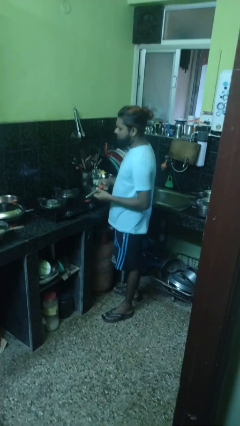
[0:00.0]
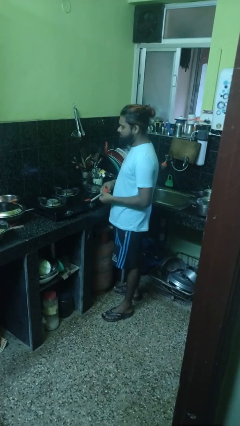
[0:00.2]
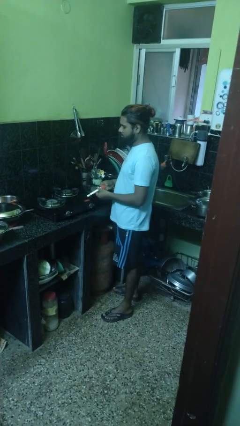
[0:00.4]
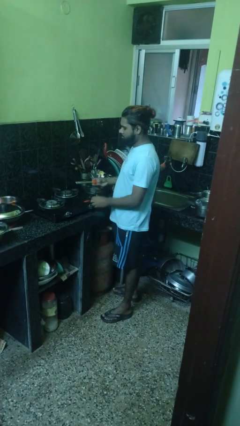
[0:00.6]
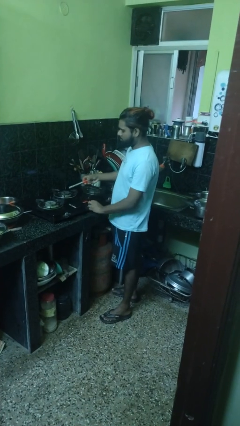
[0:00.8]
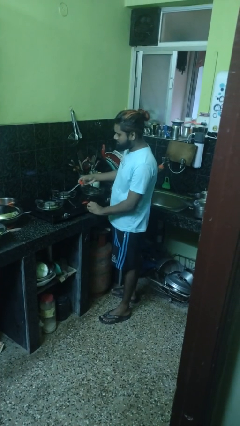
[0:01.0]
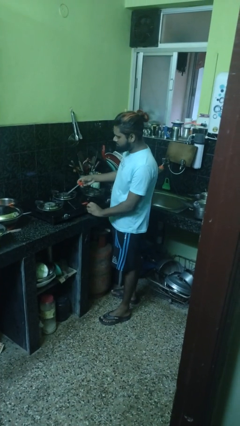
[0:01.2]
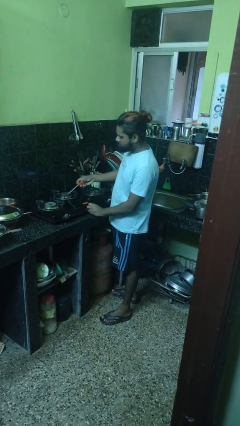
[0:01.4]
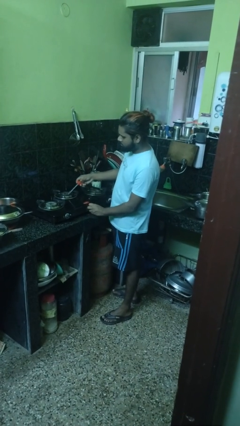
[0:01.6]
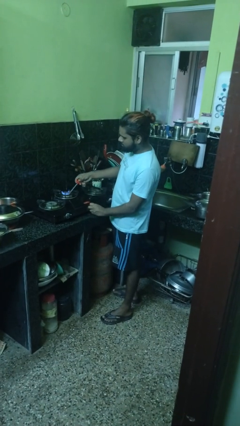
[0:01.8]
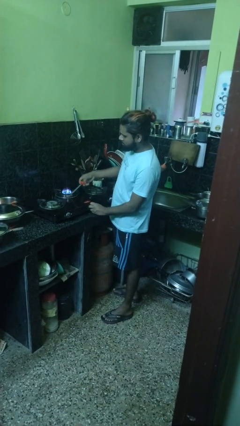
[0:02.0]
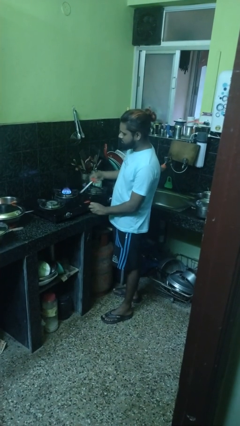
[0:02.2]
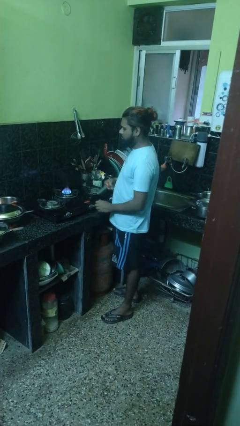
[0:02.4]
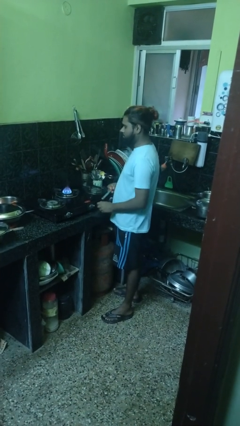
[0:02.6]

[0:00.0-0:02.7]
person turns on stovetop

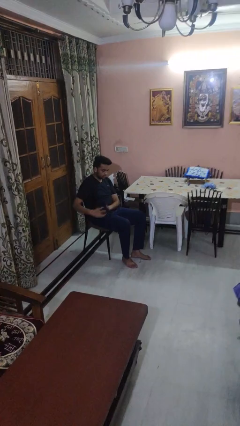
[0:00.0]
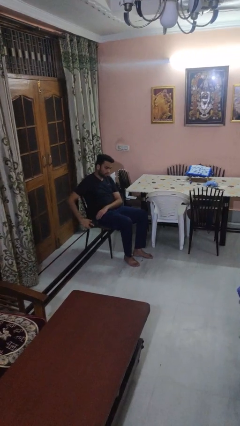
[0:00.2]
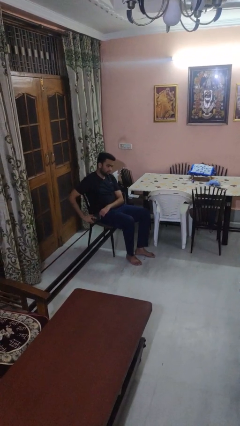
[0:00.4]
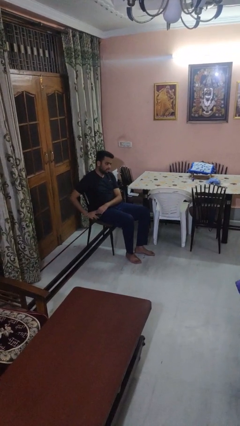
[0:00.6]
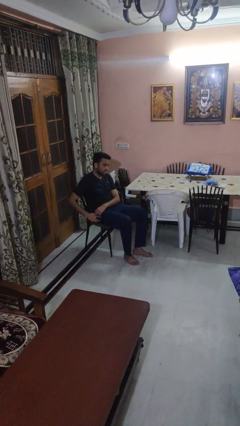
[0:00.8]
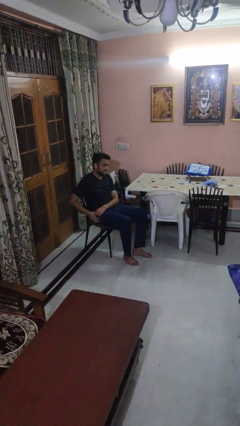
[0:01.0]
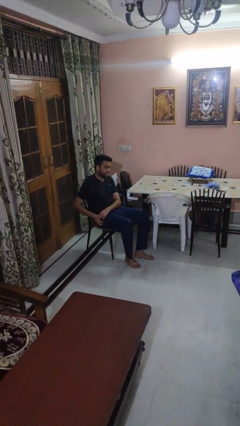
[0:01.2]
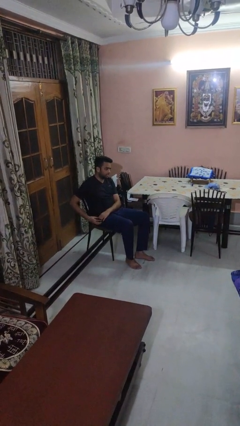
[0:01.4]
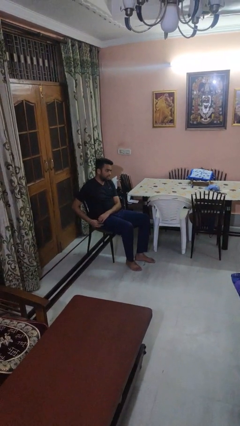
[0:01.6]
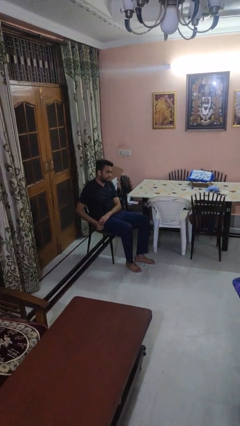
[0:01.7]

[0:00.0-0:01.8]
person puts phone into pocket

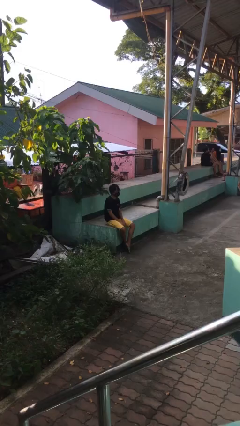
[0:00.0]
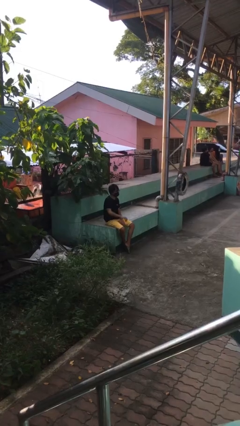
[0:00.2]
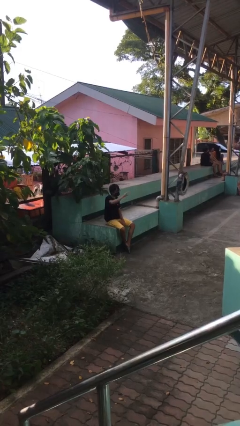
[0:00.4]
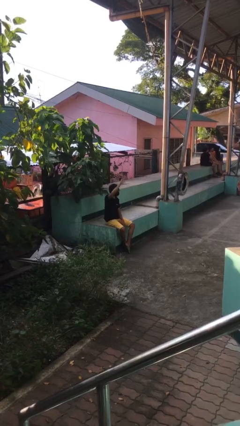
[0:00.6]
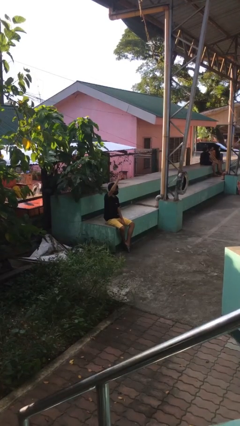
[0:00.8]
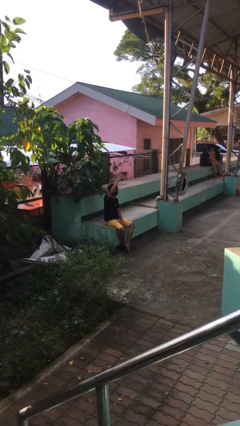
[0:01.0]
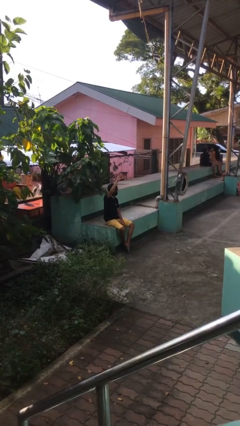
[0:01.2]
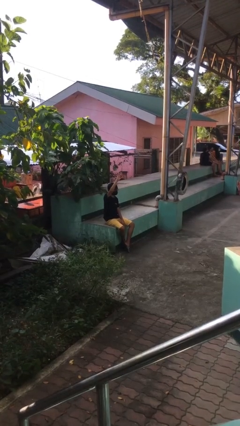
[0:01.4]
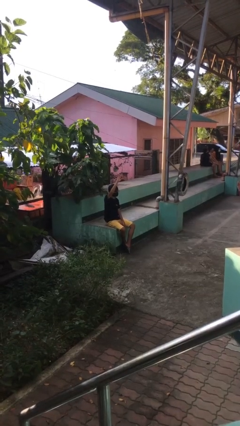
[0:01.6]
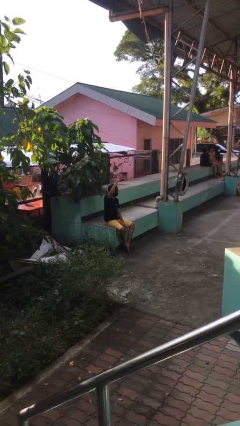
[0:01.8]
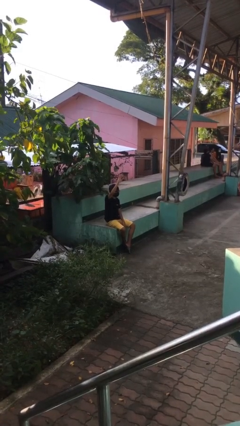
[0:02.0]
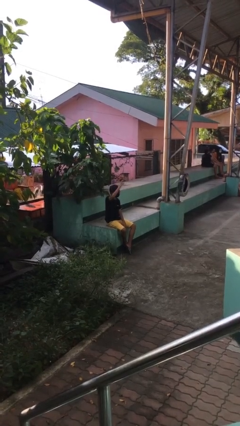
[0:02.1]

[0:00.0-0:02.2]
person gestures raise hand

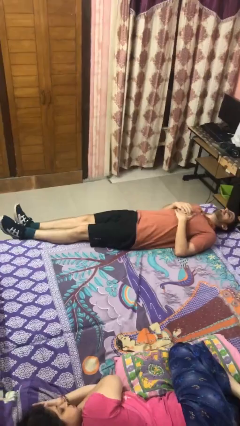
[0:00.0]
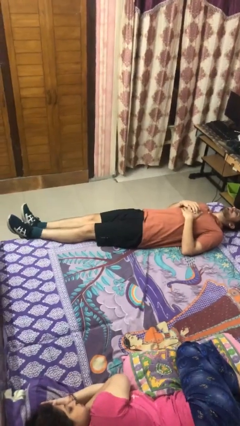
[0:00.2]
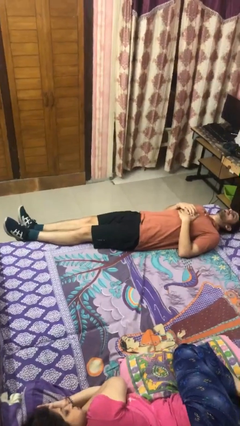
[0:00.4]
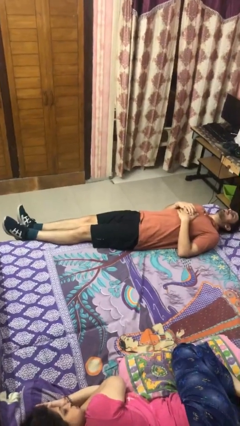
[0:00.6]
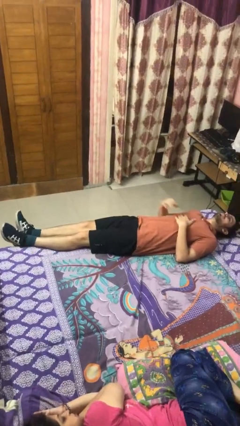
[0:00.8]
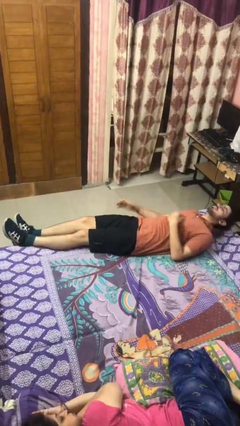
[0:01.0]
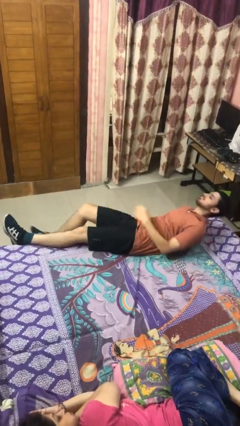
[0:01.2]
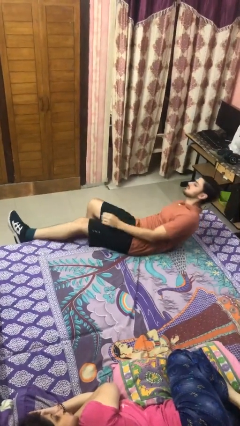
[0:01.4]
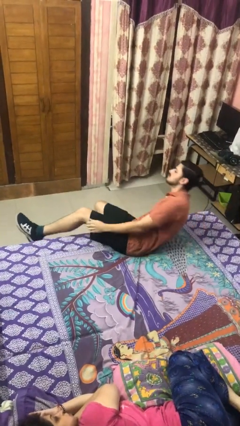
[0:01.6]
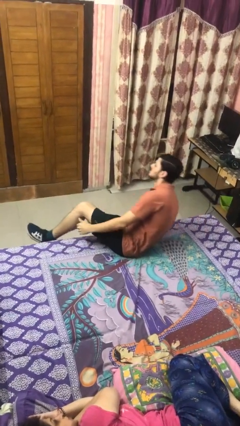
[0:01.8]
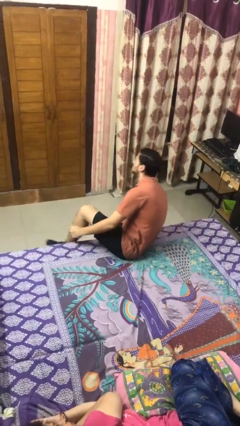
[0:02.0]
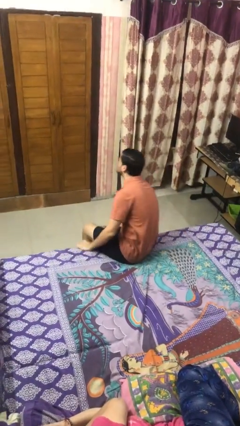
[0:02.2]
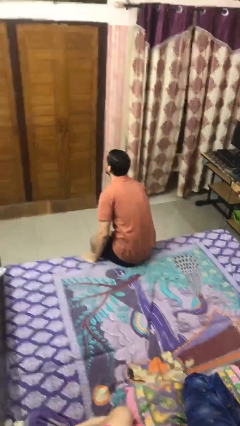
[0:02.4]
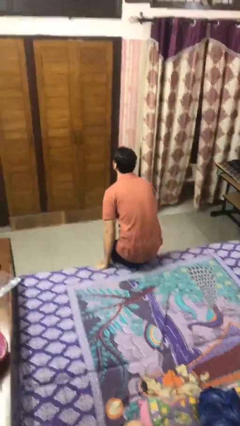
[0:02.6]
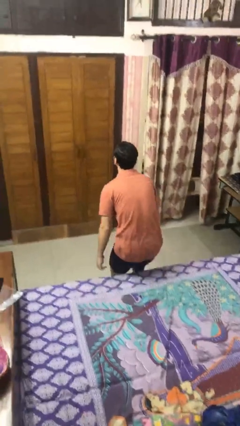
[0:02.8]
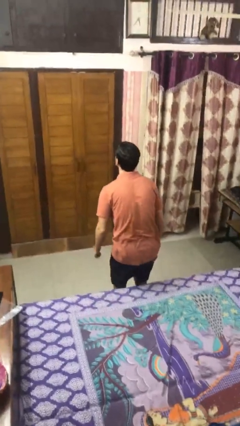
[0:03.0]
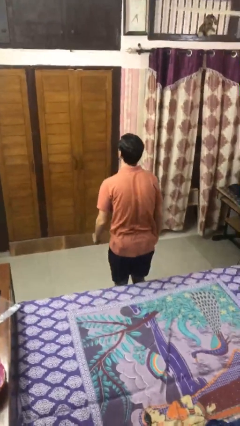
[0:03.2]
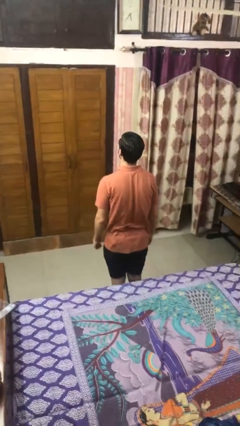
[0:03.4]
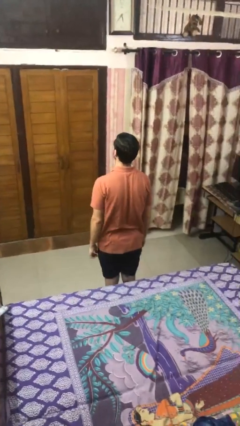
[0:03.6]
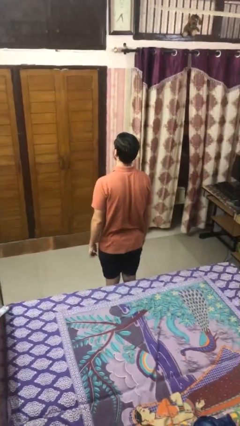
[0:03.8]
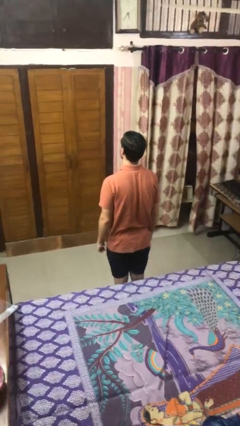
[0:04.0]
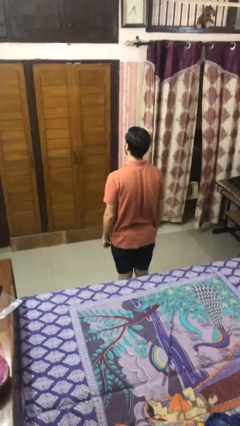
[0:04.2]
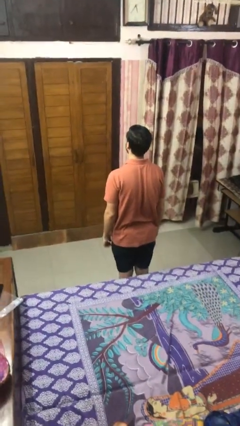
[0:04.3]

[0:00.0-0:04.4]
person stands up

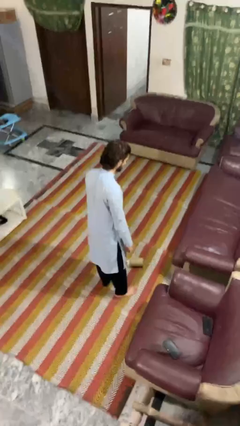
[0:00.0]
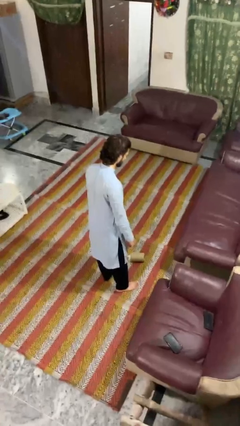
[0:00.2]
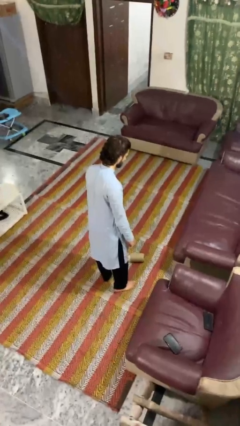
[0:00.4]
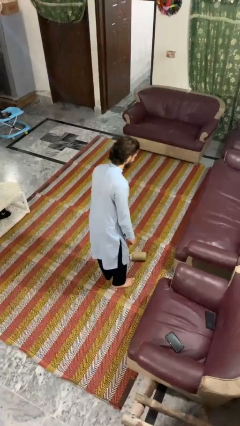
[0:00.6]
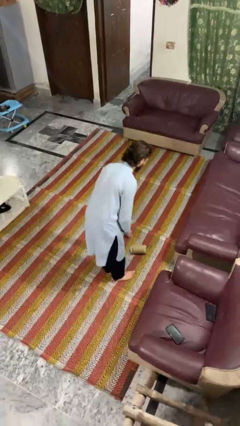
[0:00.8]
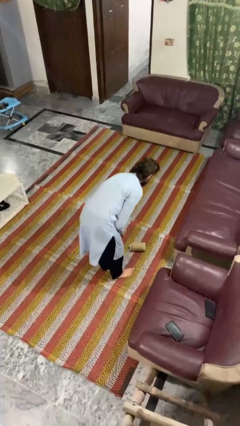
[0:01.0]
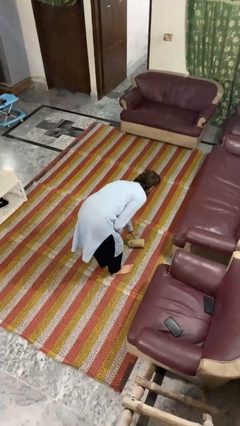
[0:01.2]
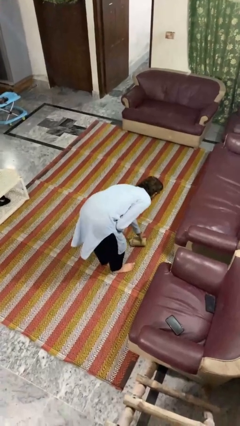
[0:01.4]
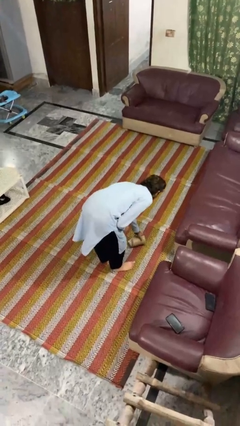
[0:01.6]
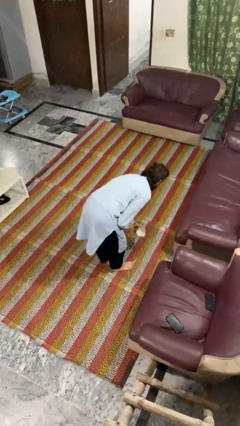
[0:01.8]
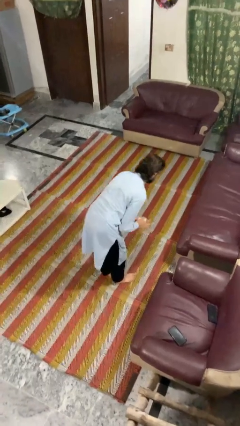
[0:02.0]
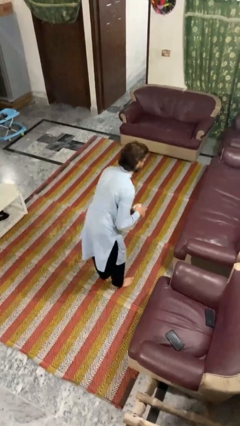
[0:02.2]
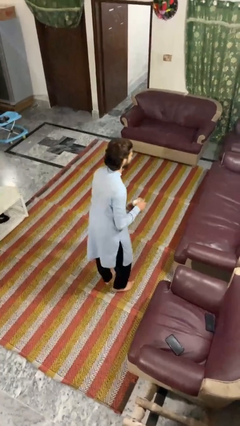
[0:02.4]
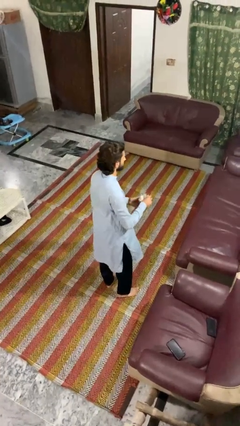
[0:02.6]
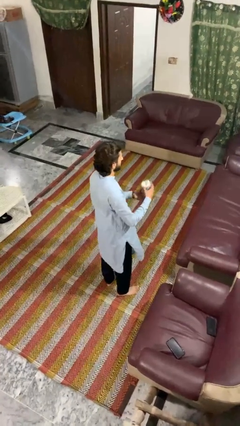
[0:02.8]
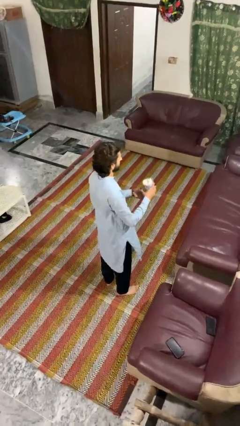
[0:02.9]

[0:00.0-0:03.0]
person picks up object from floor

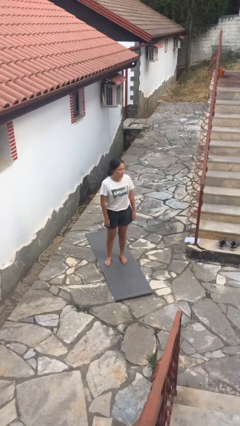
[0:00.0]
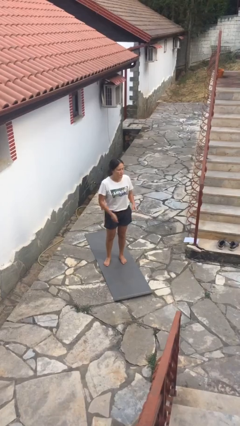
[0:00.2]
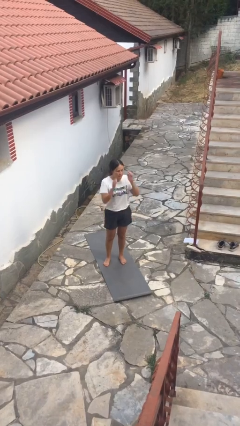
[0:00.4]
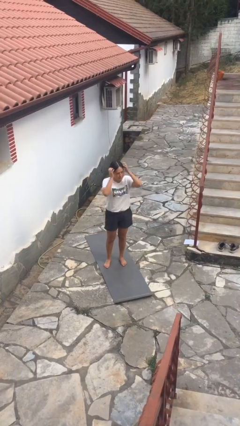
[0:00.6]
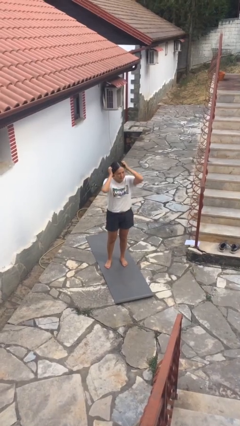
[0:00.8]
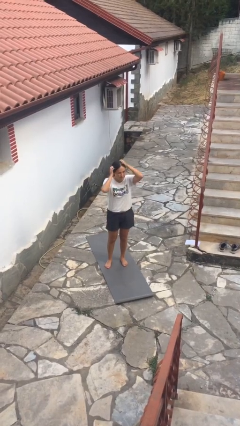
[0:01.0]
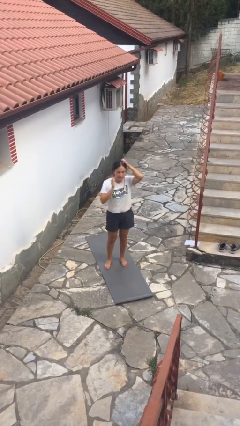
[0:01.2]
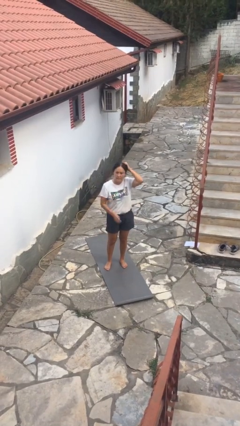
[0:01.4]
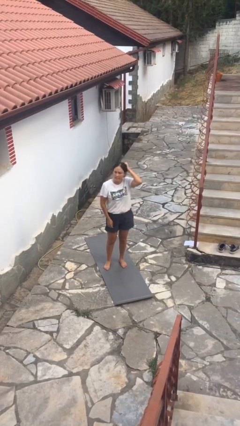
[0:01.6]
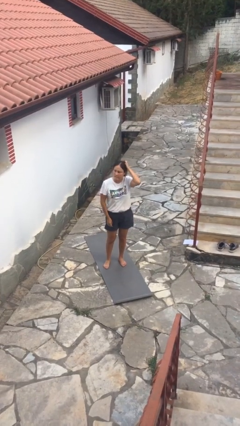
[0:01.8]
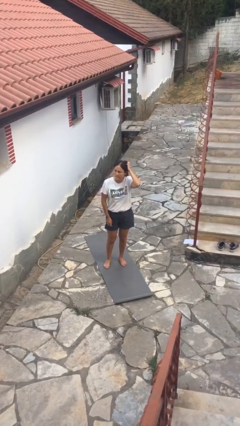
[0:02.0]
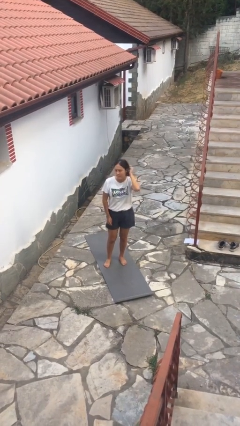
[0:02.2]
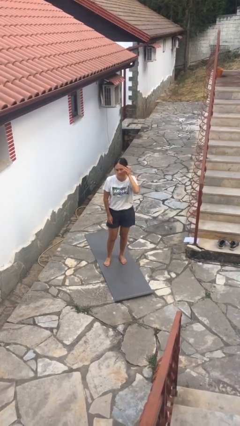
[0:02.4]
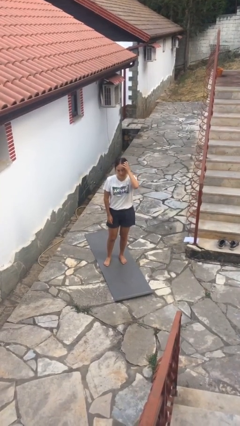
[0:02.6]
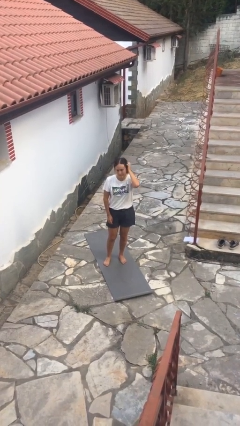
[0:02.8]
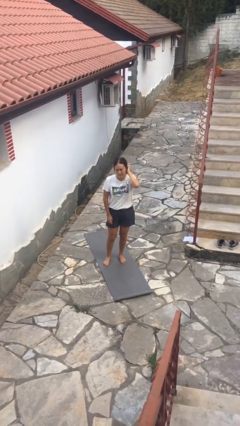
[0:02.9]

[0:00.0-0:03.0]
person scratches face

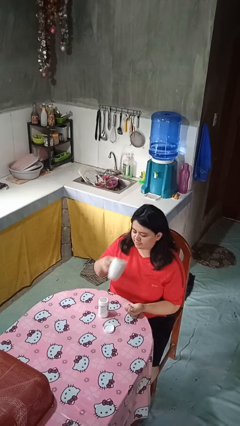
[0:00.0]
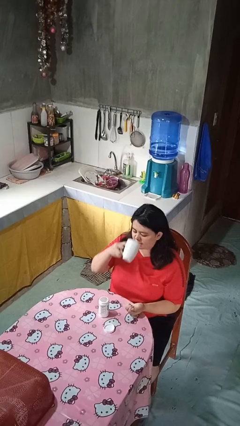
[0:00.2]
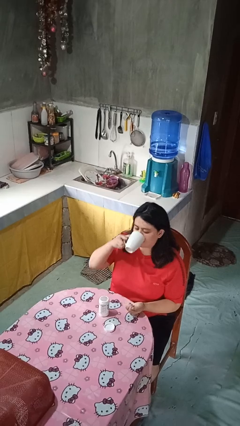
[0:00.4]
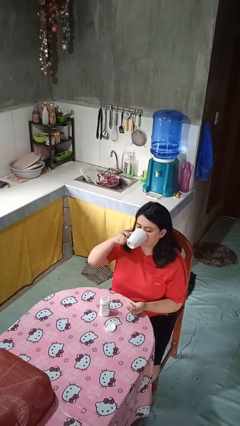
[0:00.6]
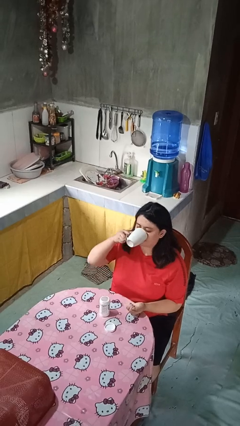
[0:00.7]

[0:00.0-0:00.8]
person drinks from cup
